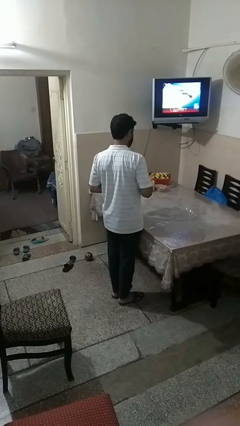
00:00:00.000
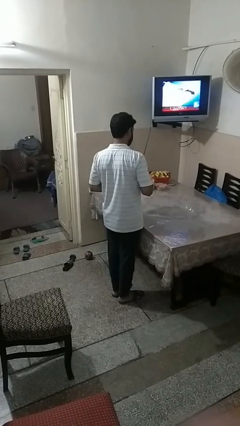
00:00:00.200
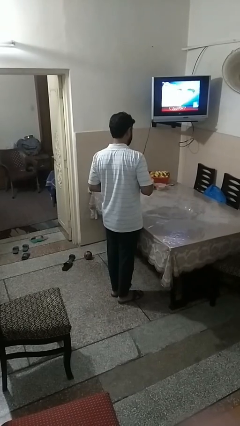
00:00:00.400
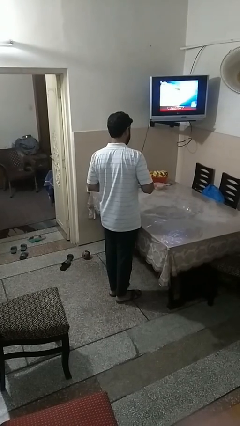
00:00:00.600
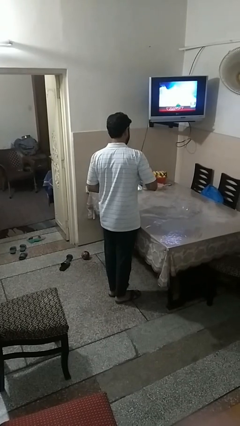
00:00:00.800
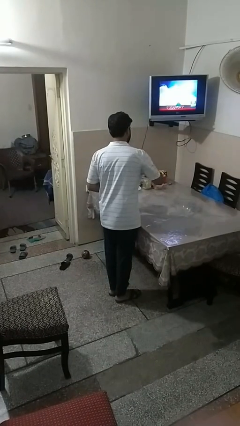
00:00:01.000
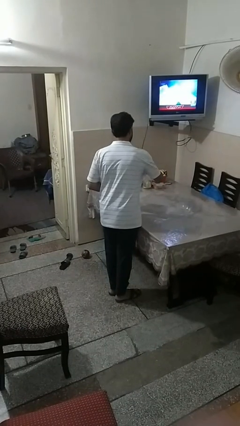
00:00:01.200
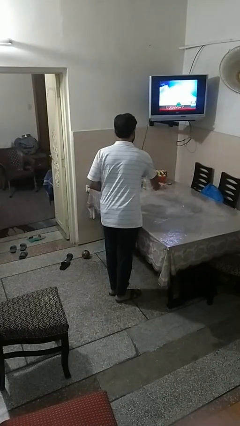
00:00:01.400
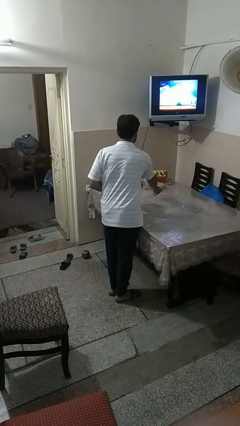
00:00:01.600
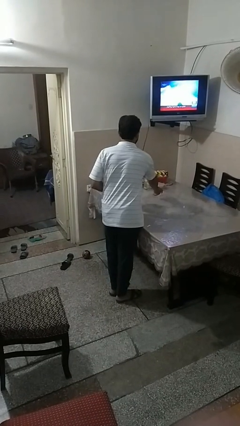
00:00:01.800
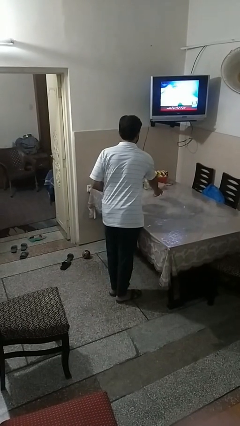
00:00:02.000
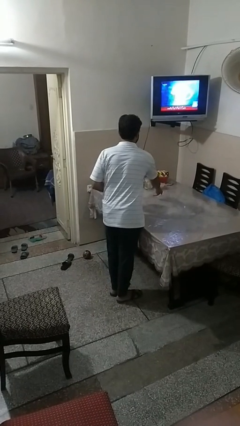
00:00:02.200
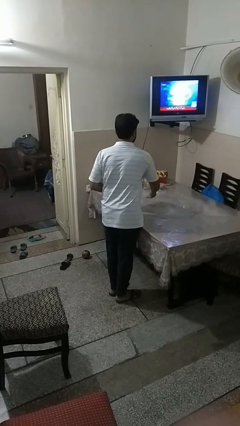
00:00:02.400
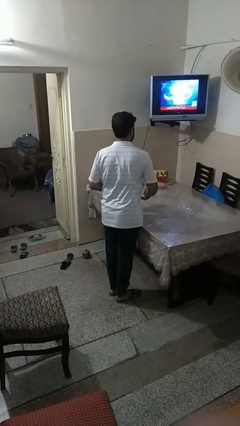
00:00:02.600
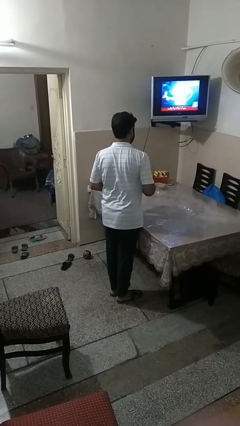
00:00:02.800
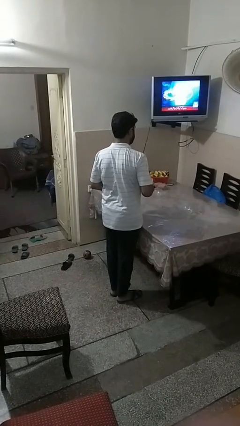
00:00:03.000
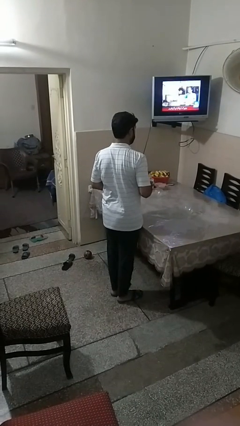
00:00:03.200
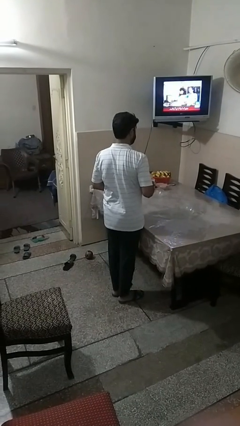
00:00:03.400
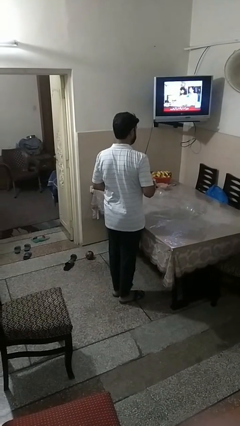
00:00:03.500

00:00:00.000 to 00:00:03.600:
person sets table

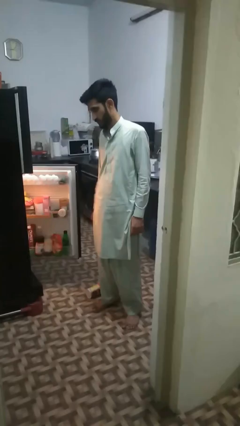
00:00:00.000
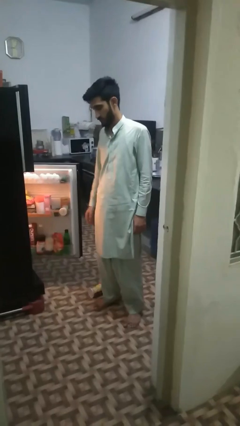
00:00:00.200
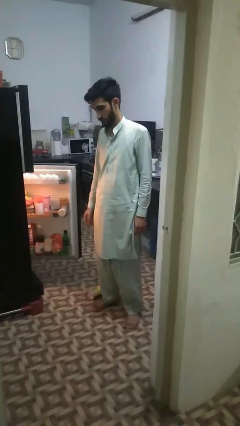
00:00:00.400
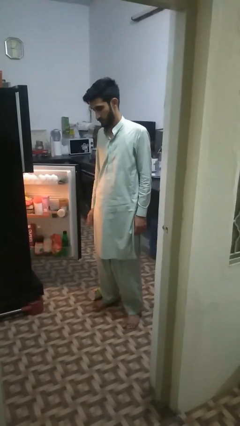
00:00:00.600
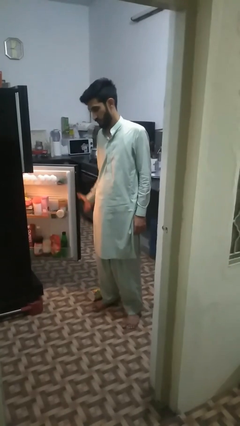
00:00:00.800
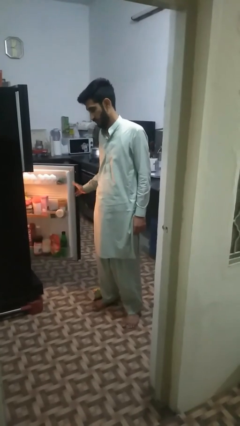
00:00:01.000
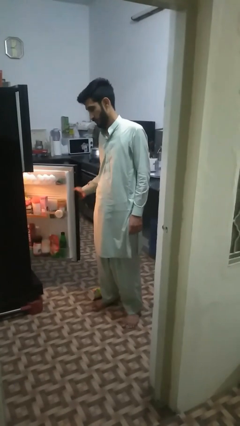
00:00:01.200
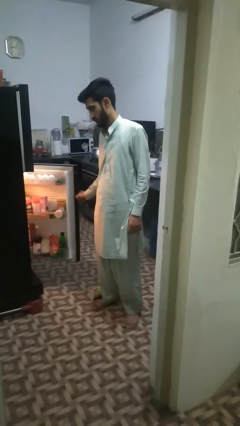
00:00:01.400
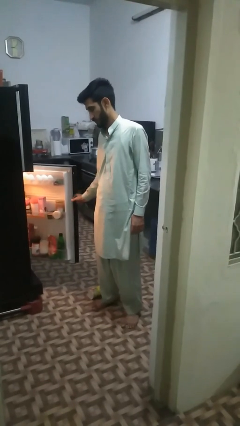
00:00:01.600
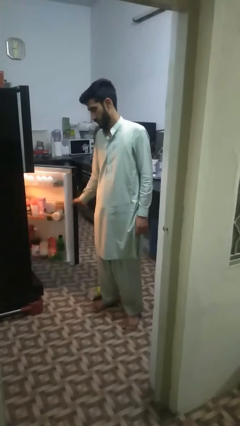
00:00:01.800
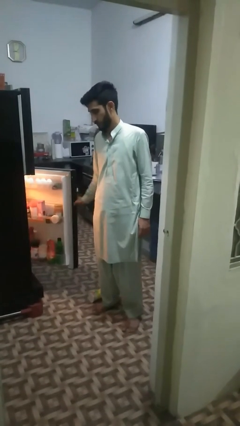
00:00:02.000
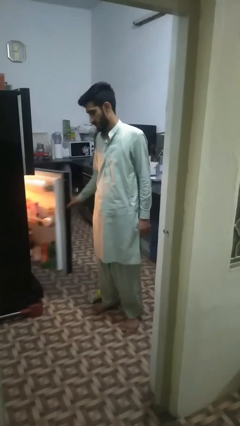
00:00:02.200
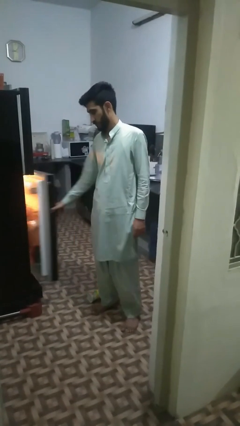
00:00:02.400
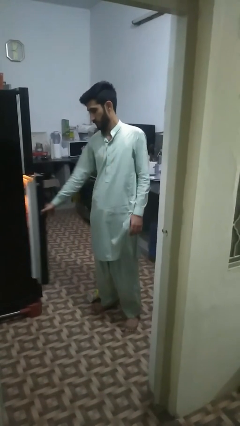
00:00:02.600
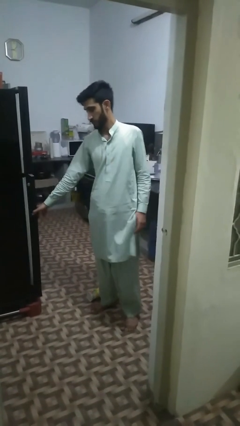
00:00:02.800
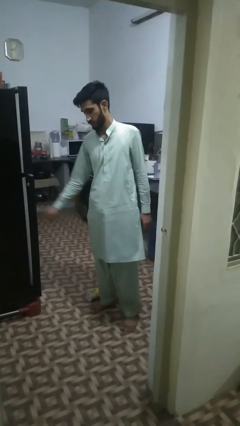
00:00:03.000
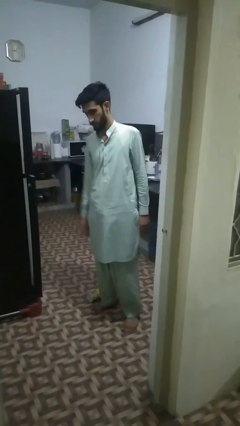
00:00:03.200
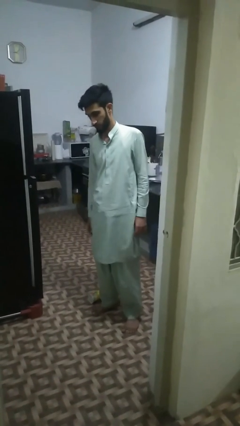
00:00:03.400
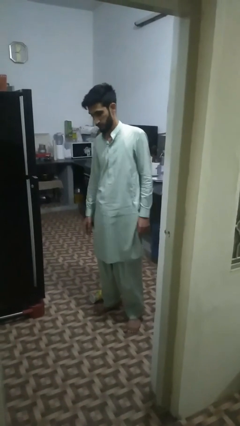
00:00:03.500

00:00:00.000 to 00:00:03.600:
person closes refrigerator

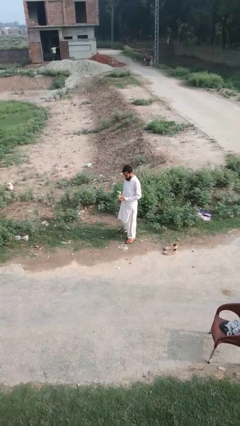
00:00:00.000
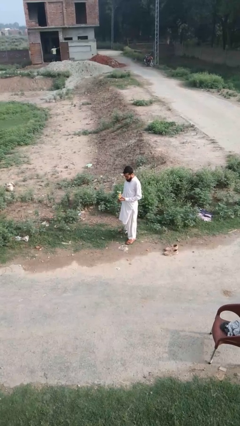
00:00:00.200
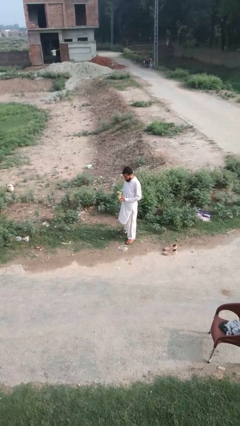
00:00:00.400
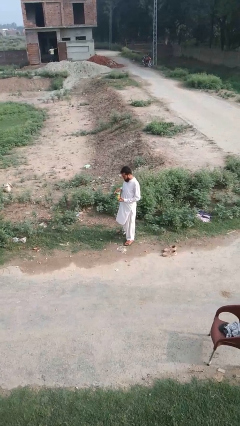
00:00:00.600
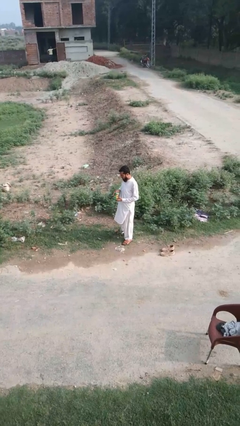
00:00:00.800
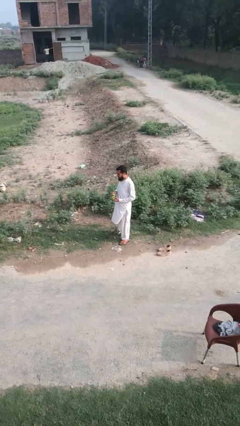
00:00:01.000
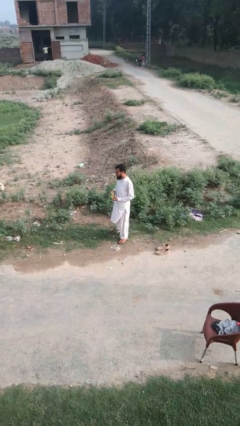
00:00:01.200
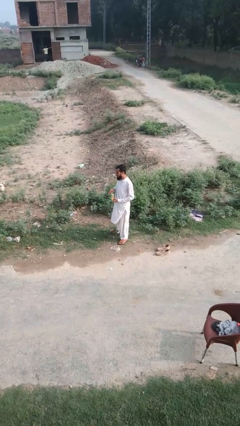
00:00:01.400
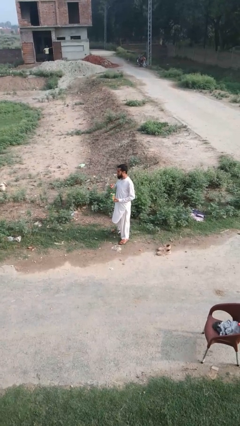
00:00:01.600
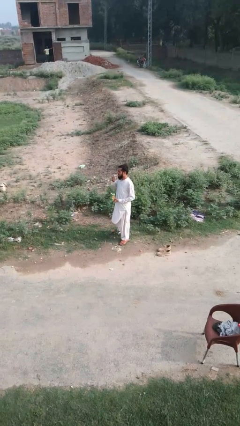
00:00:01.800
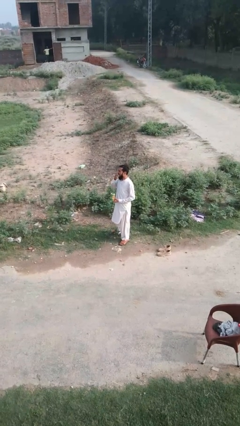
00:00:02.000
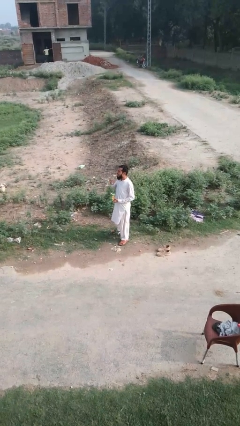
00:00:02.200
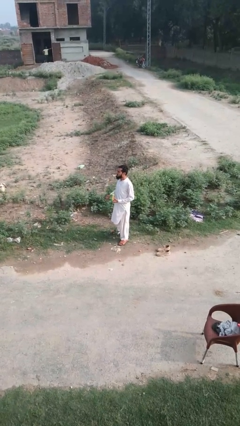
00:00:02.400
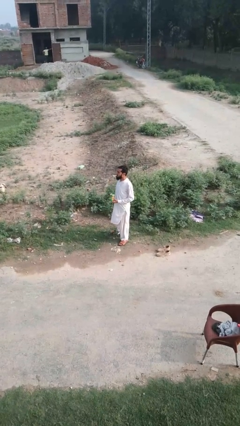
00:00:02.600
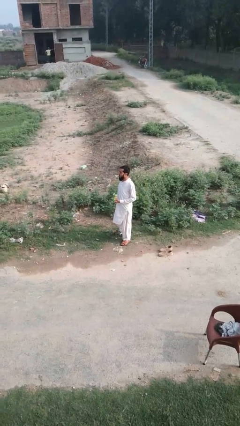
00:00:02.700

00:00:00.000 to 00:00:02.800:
person eats snack from bag

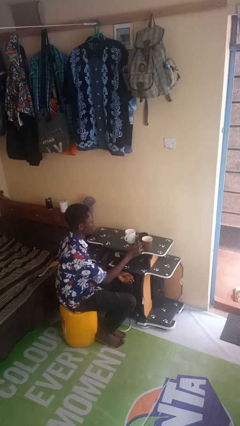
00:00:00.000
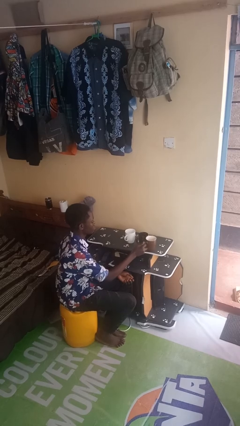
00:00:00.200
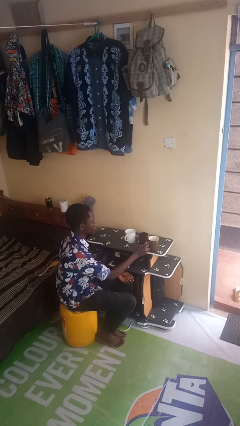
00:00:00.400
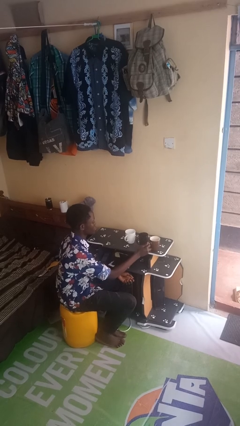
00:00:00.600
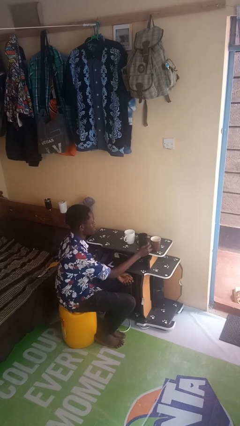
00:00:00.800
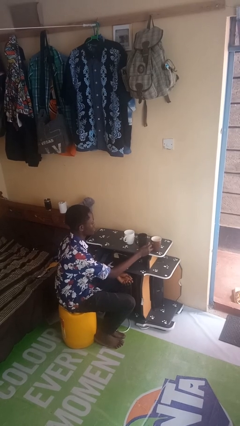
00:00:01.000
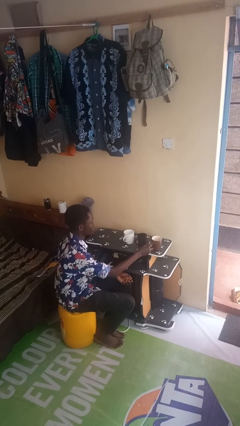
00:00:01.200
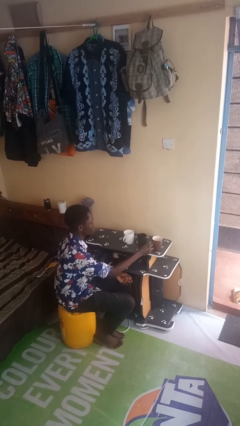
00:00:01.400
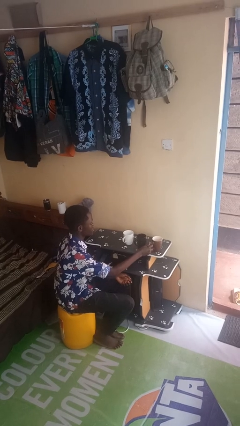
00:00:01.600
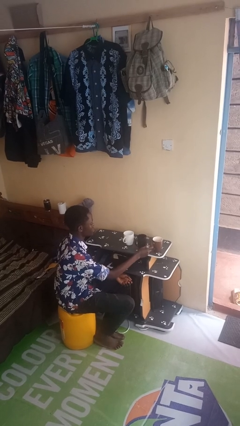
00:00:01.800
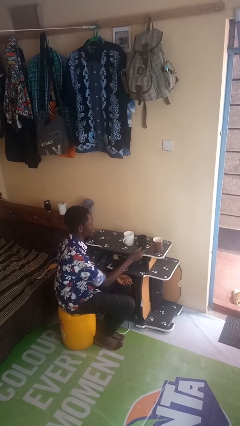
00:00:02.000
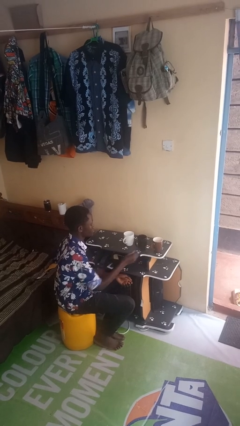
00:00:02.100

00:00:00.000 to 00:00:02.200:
person puts down object on table

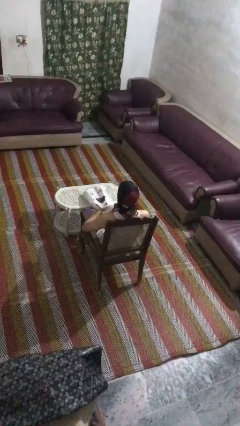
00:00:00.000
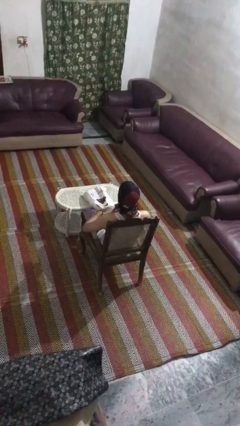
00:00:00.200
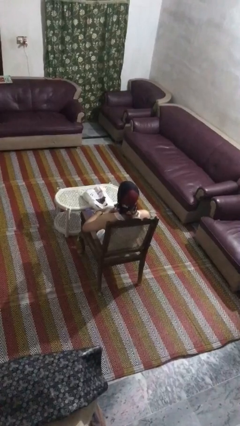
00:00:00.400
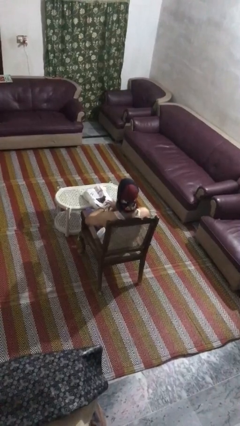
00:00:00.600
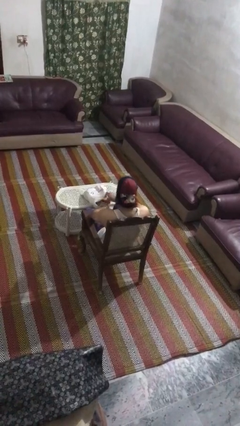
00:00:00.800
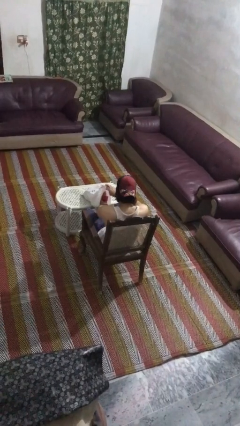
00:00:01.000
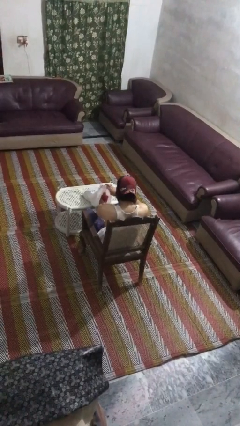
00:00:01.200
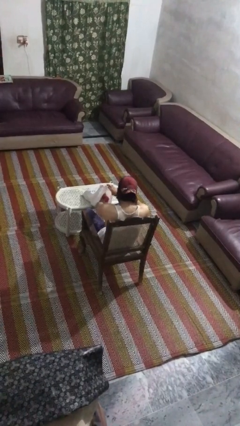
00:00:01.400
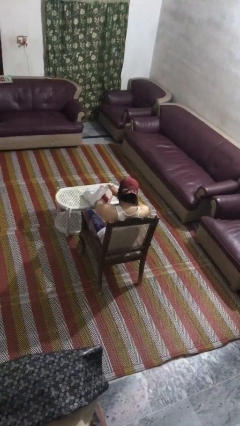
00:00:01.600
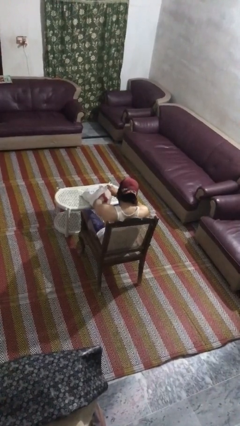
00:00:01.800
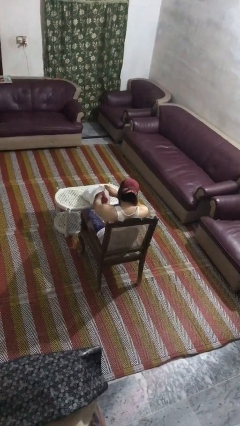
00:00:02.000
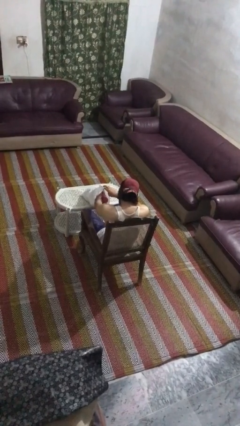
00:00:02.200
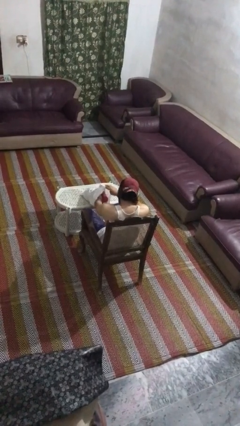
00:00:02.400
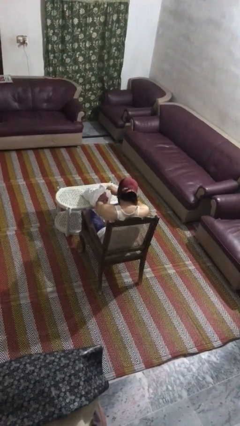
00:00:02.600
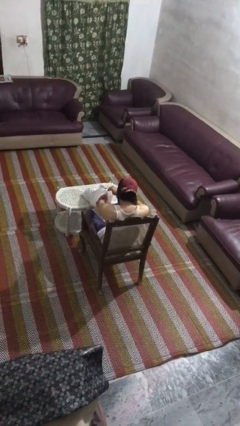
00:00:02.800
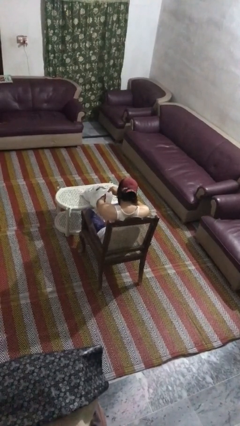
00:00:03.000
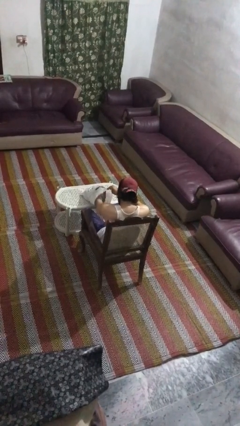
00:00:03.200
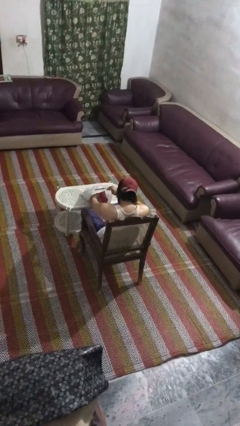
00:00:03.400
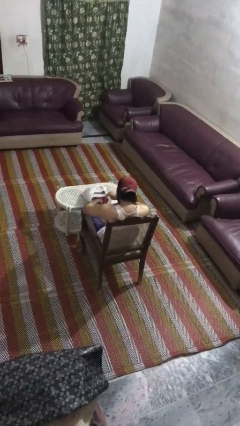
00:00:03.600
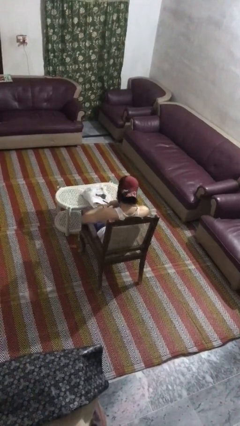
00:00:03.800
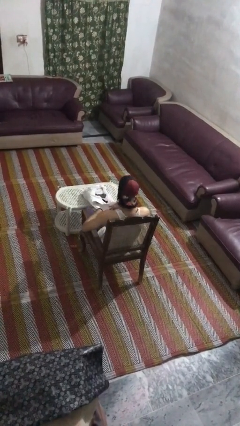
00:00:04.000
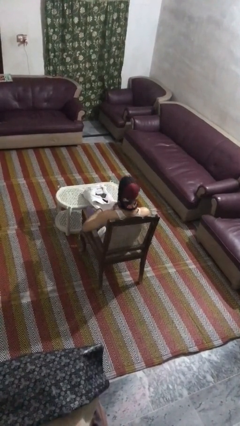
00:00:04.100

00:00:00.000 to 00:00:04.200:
person searches in bag

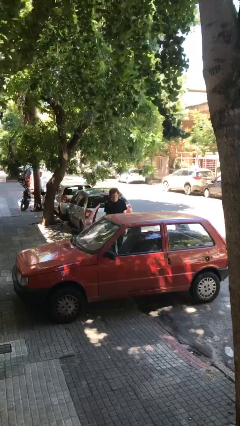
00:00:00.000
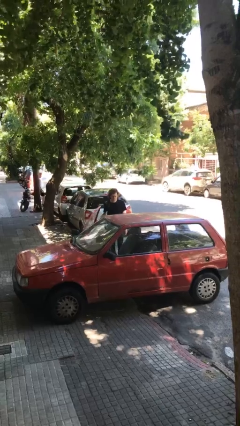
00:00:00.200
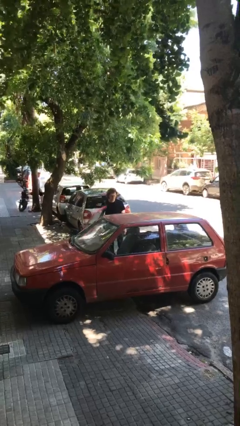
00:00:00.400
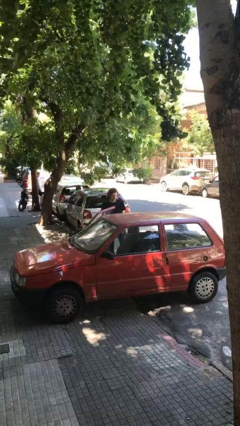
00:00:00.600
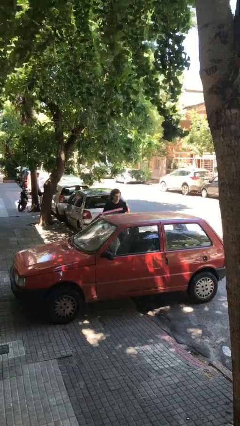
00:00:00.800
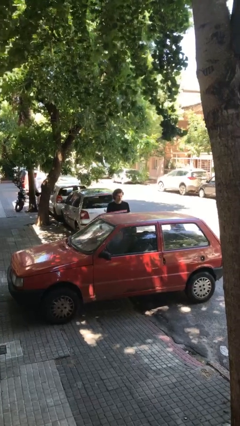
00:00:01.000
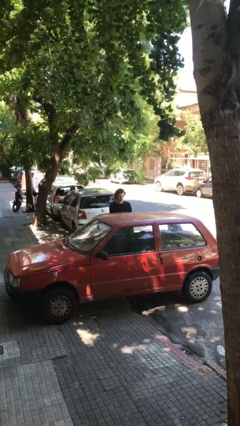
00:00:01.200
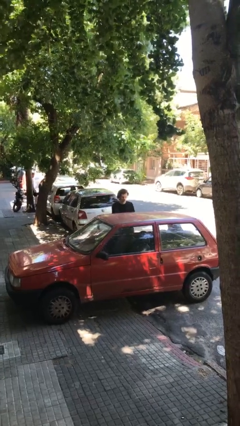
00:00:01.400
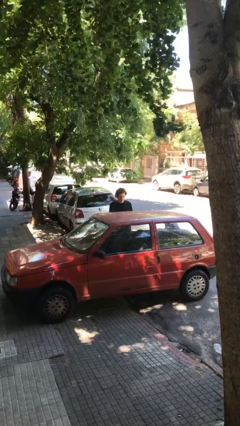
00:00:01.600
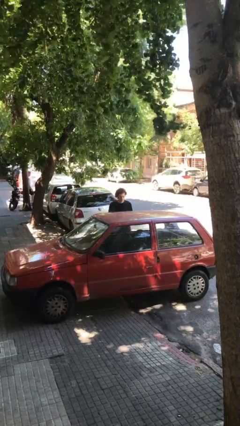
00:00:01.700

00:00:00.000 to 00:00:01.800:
person closes car door
